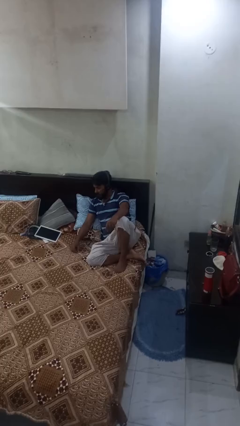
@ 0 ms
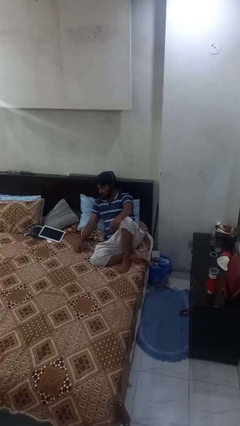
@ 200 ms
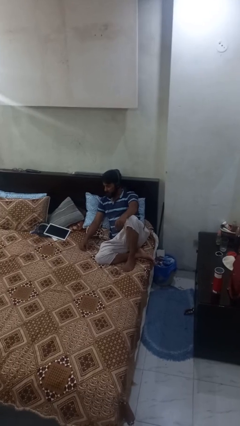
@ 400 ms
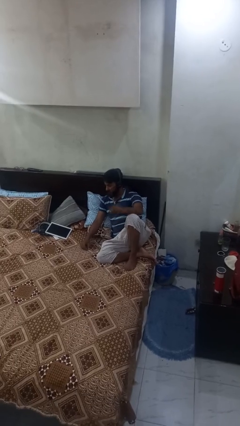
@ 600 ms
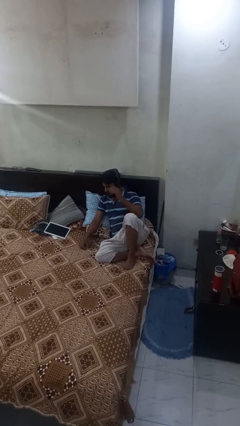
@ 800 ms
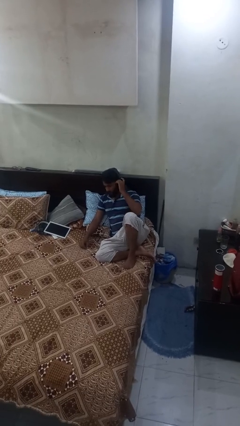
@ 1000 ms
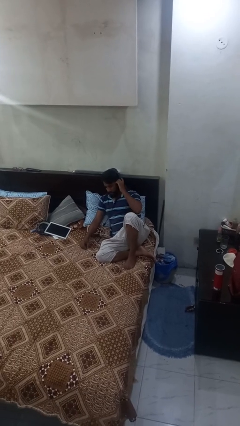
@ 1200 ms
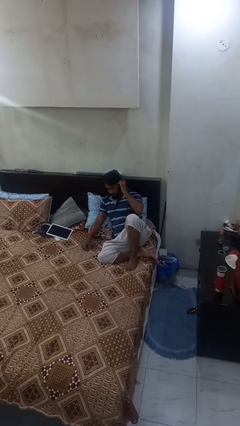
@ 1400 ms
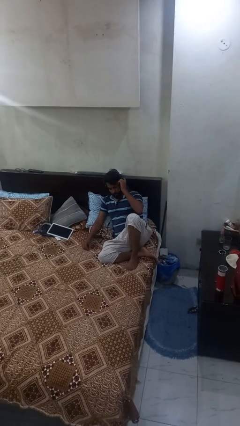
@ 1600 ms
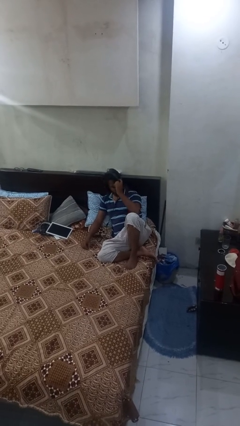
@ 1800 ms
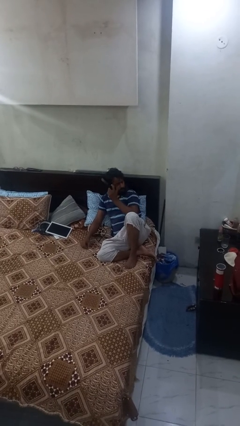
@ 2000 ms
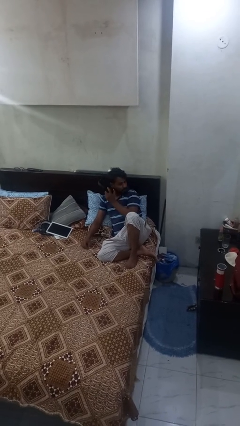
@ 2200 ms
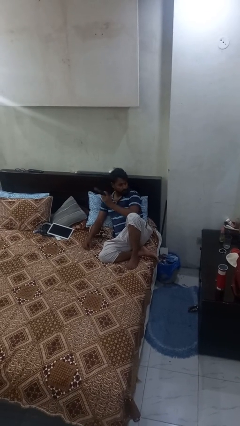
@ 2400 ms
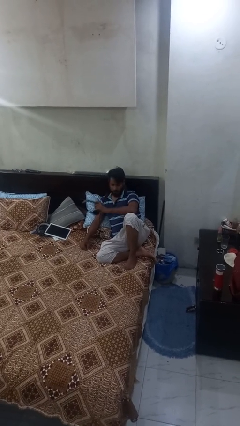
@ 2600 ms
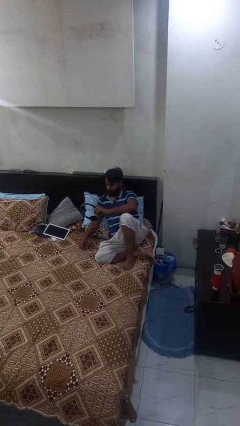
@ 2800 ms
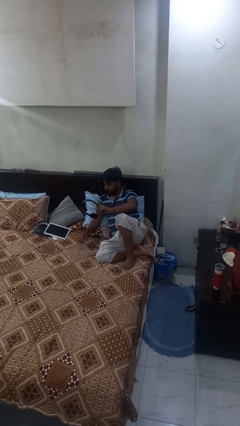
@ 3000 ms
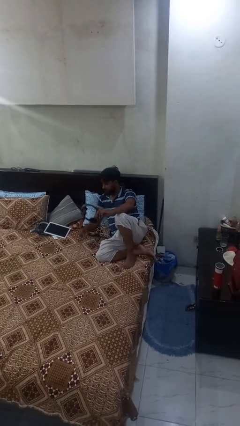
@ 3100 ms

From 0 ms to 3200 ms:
person takes off headphones

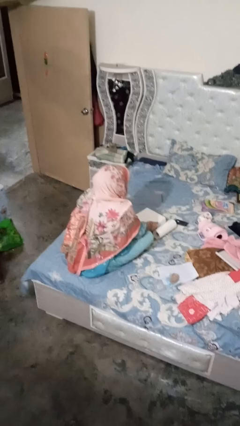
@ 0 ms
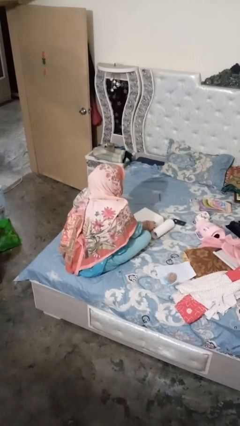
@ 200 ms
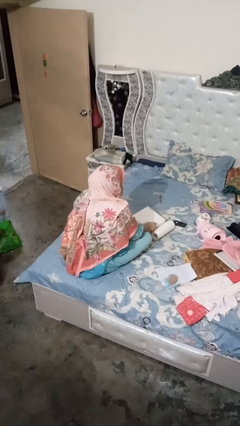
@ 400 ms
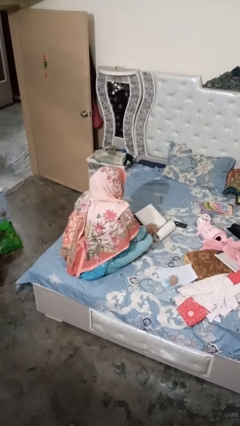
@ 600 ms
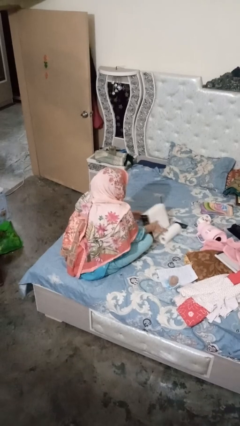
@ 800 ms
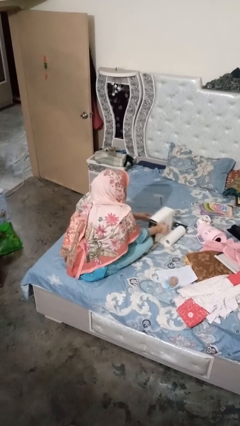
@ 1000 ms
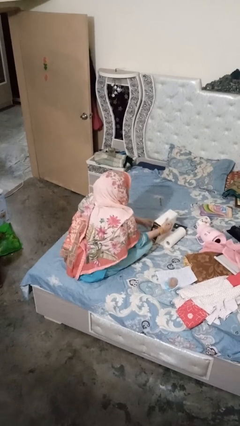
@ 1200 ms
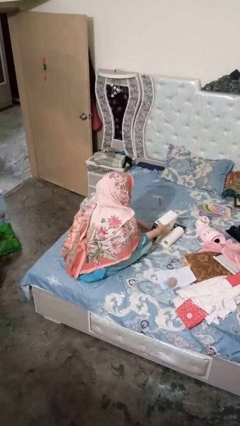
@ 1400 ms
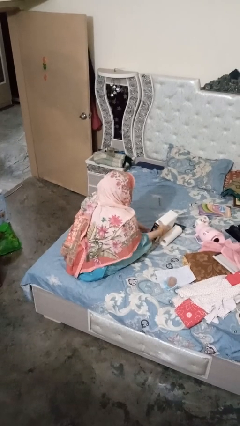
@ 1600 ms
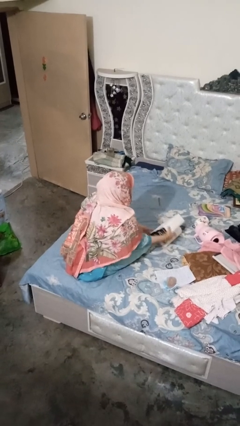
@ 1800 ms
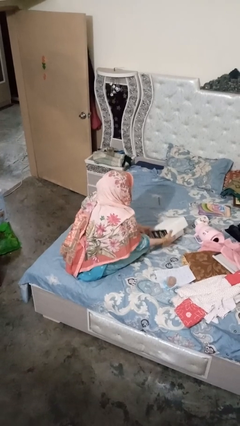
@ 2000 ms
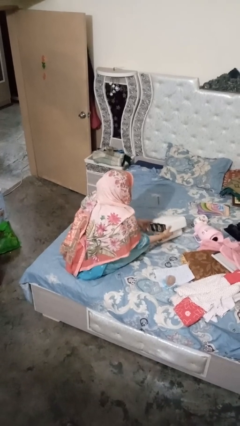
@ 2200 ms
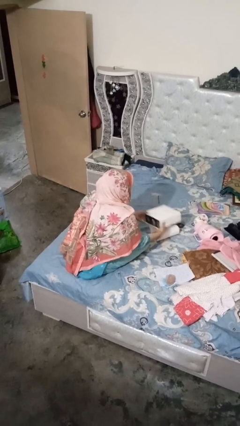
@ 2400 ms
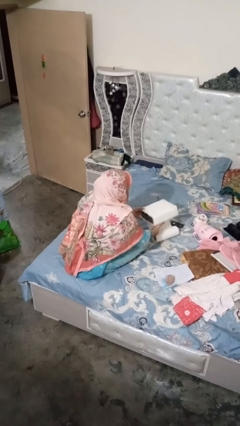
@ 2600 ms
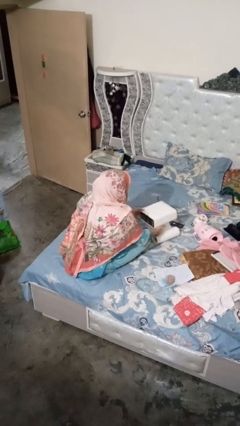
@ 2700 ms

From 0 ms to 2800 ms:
person wraps box

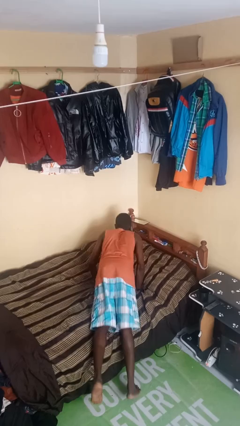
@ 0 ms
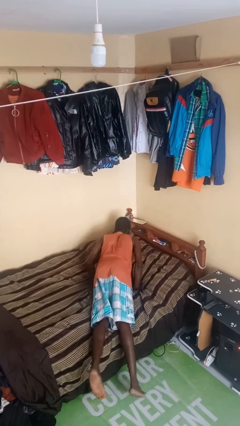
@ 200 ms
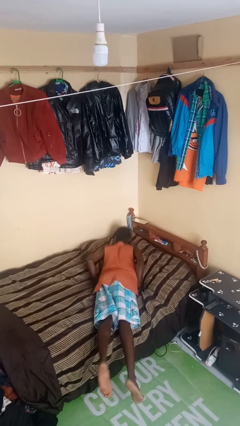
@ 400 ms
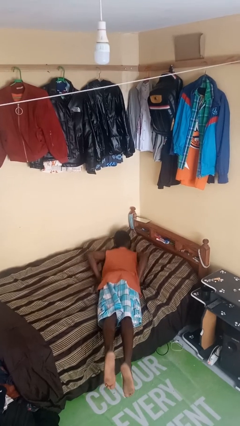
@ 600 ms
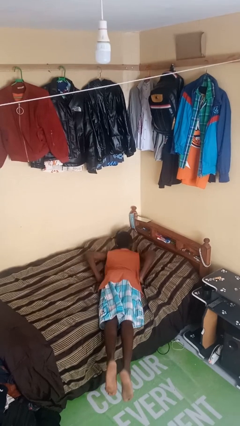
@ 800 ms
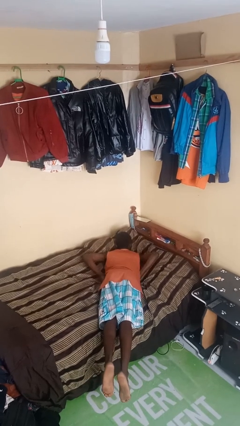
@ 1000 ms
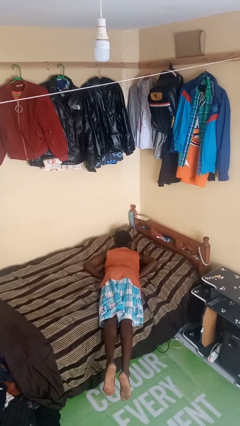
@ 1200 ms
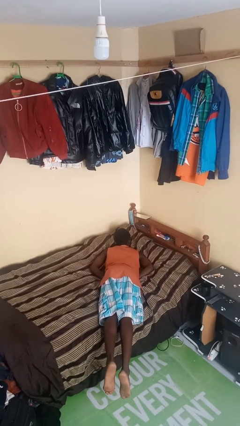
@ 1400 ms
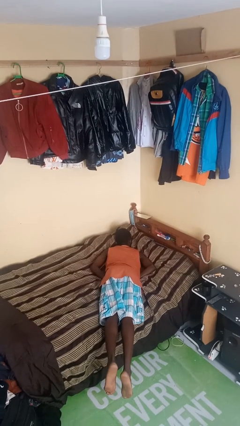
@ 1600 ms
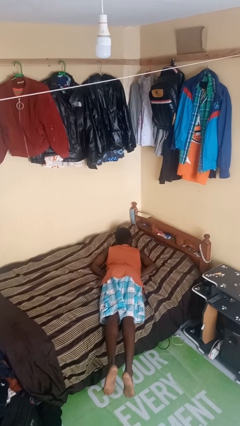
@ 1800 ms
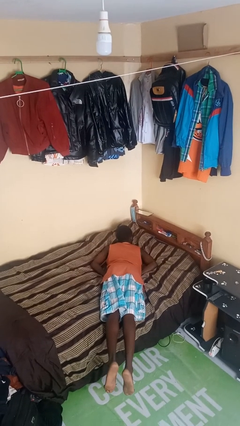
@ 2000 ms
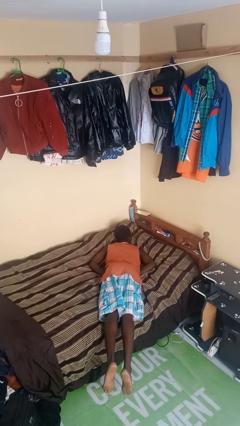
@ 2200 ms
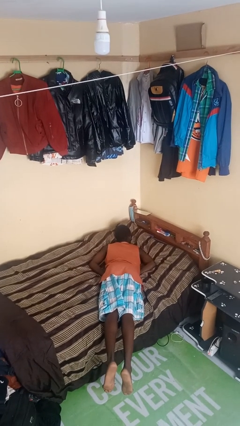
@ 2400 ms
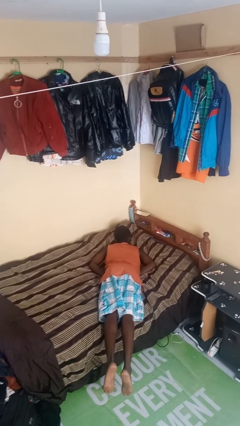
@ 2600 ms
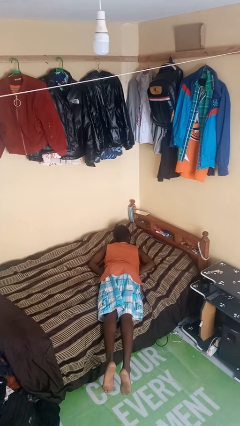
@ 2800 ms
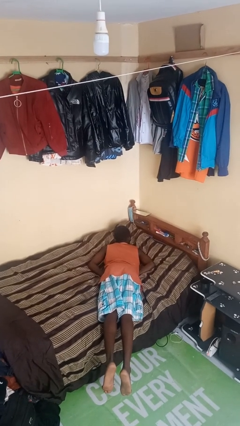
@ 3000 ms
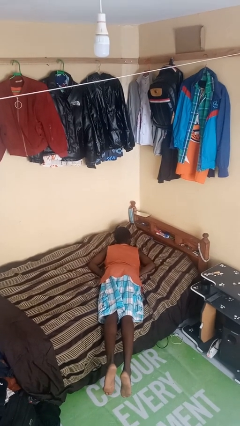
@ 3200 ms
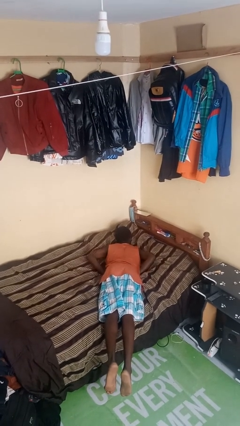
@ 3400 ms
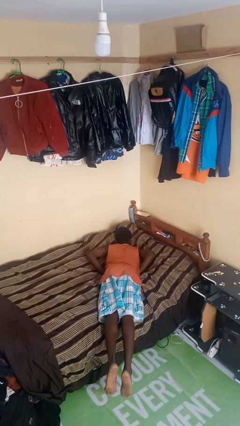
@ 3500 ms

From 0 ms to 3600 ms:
person lies down on bed

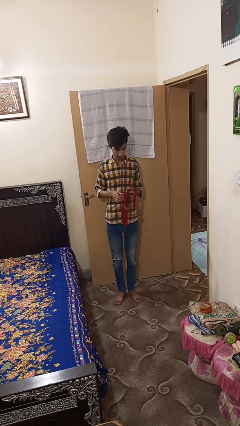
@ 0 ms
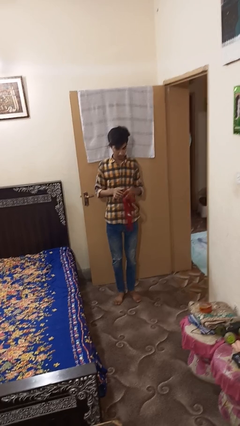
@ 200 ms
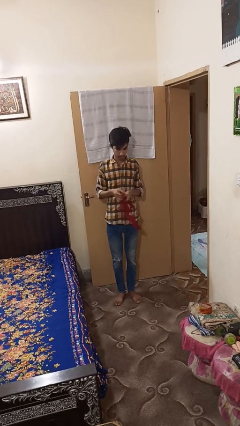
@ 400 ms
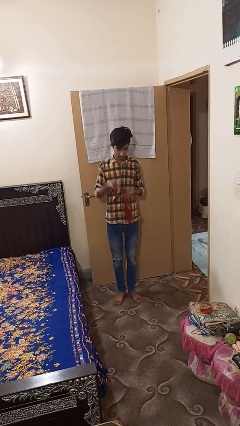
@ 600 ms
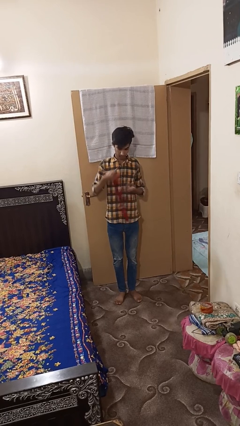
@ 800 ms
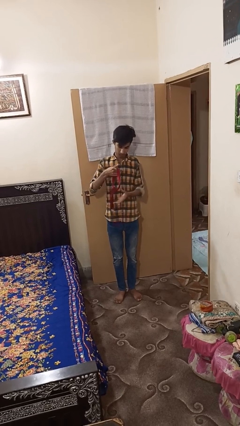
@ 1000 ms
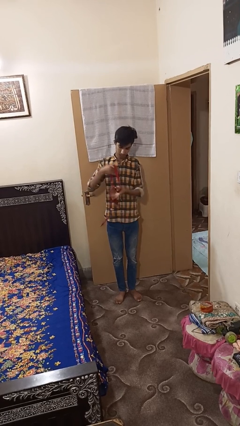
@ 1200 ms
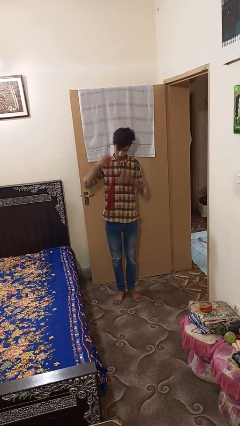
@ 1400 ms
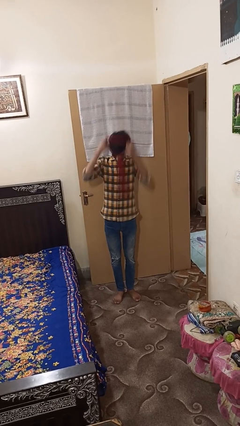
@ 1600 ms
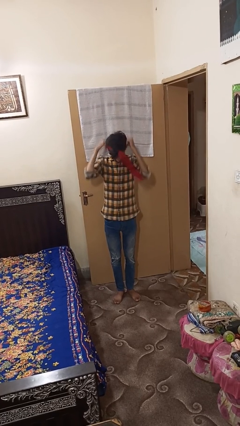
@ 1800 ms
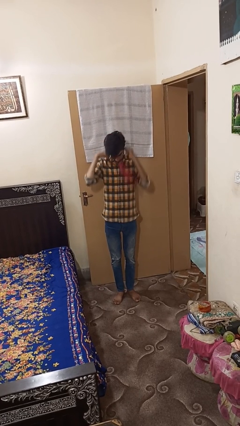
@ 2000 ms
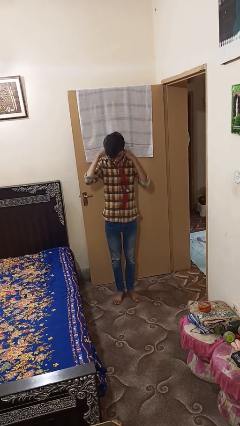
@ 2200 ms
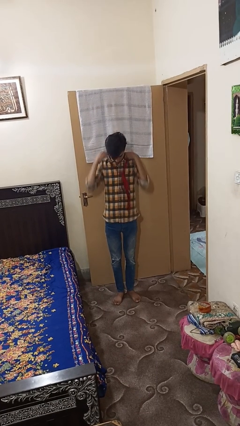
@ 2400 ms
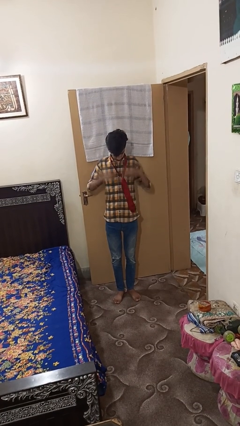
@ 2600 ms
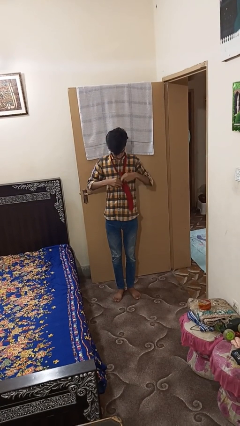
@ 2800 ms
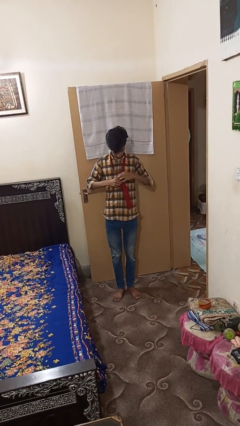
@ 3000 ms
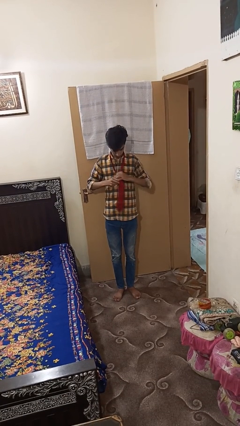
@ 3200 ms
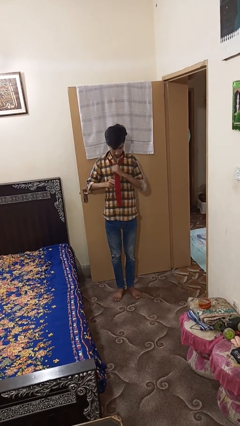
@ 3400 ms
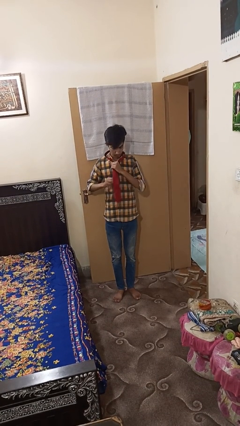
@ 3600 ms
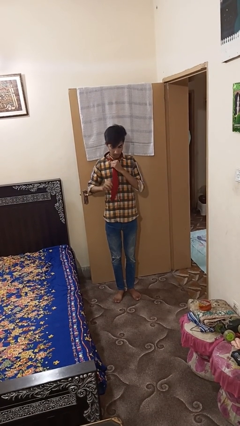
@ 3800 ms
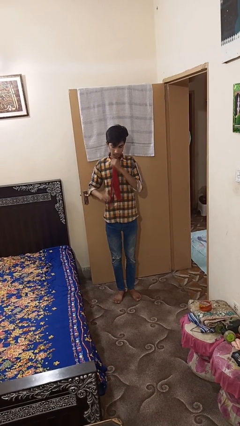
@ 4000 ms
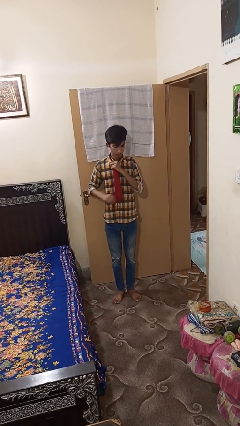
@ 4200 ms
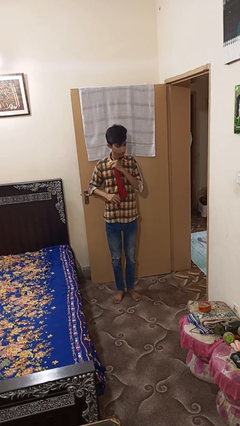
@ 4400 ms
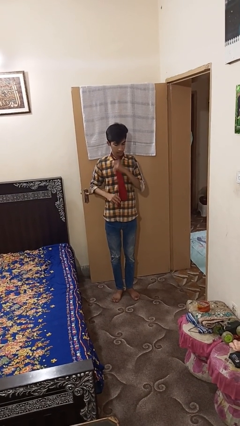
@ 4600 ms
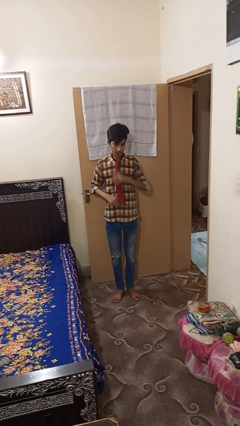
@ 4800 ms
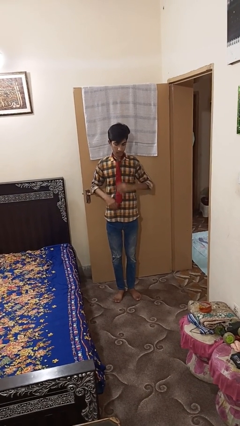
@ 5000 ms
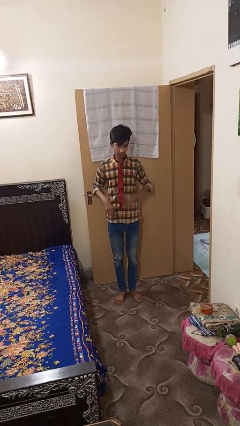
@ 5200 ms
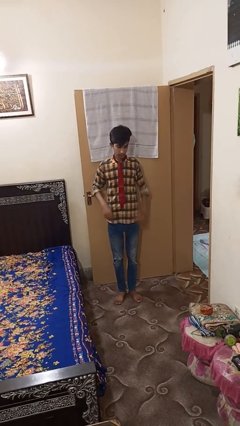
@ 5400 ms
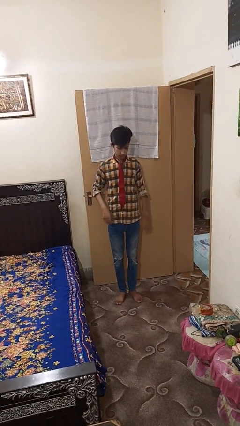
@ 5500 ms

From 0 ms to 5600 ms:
person puts on necktie

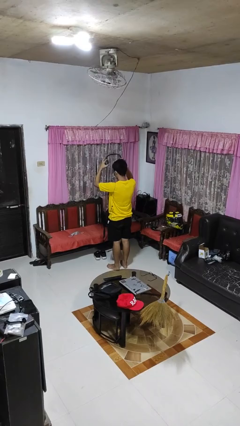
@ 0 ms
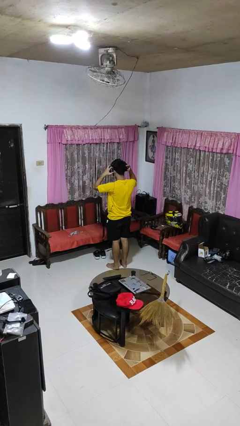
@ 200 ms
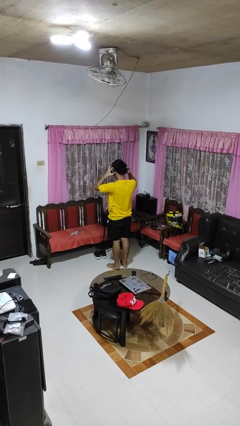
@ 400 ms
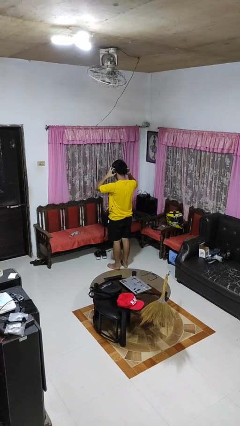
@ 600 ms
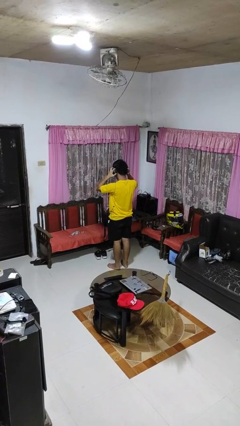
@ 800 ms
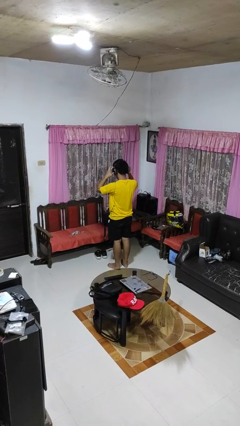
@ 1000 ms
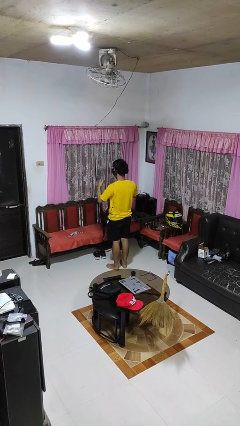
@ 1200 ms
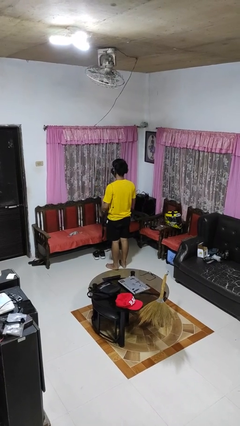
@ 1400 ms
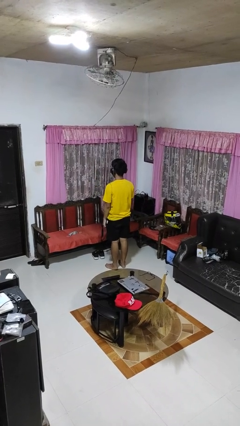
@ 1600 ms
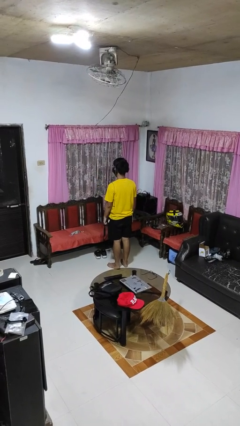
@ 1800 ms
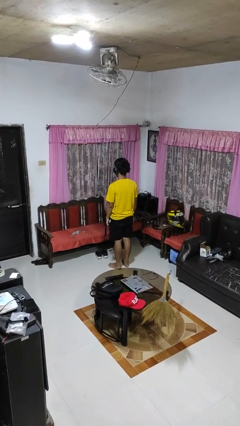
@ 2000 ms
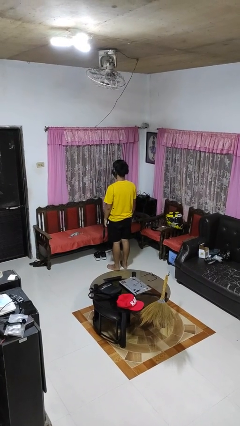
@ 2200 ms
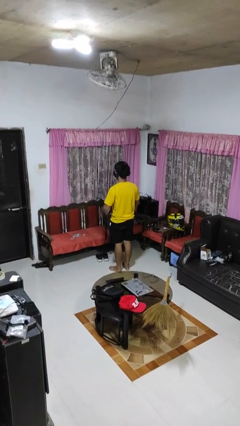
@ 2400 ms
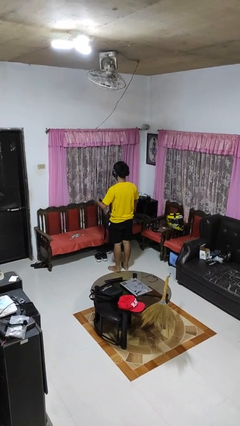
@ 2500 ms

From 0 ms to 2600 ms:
person puts on headphones
